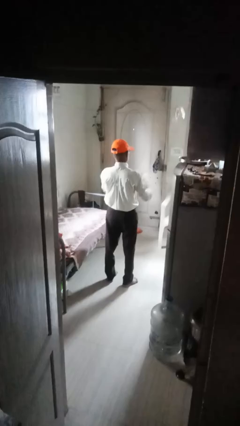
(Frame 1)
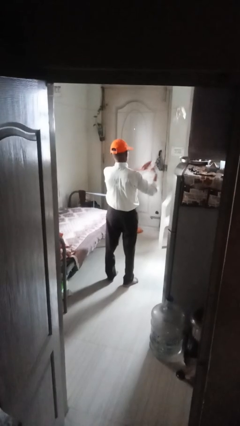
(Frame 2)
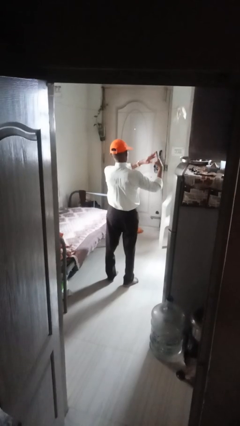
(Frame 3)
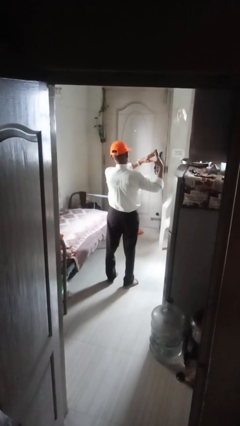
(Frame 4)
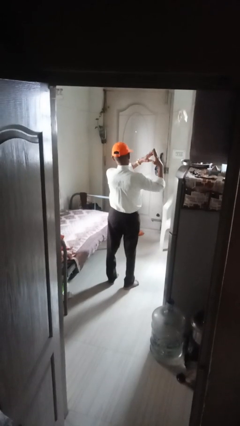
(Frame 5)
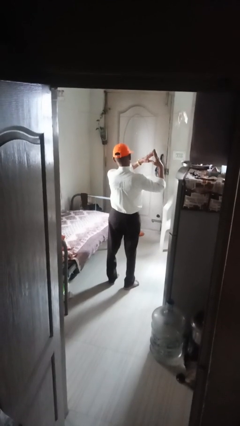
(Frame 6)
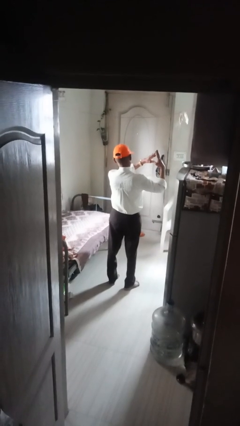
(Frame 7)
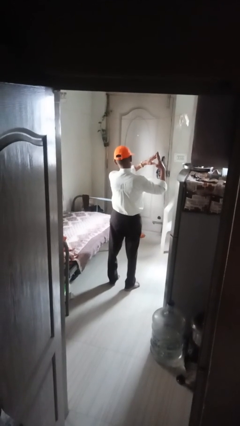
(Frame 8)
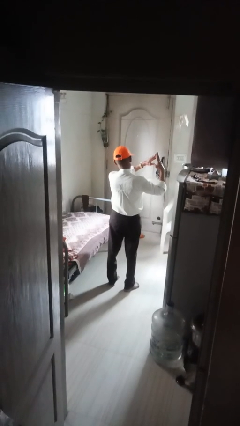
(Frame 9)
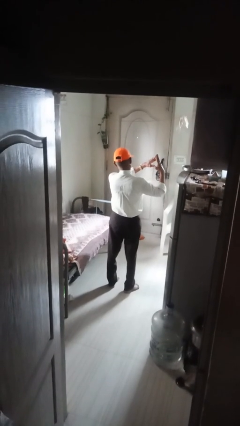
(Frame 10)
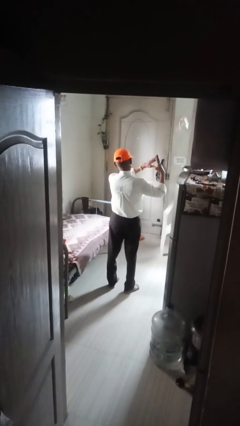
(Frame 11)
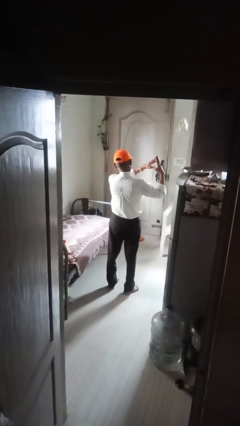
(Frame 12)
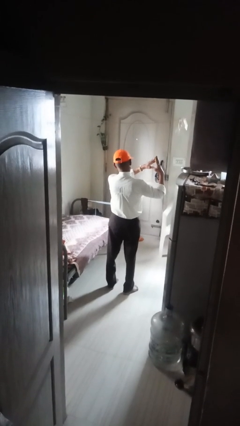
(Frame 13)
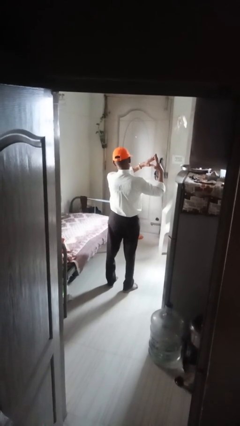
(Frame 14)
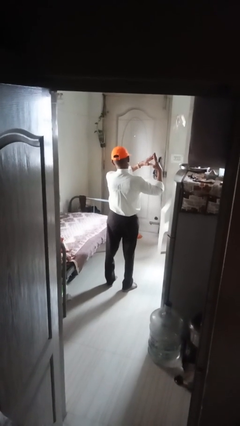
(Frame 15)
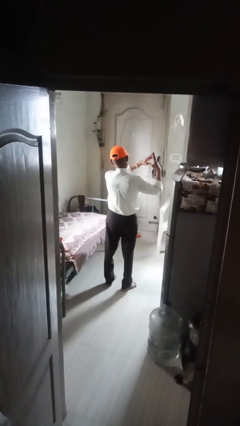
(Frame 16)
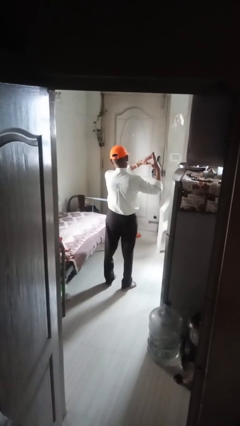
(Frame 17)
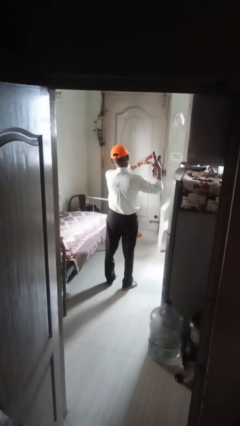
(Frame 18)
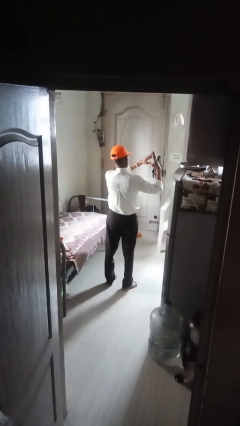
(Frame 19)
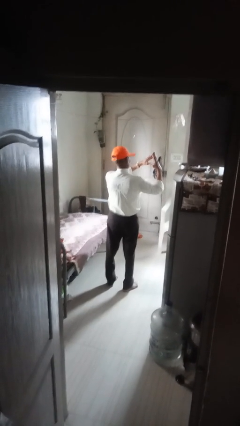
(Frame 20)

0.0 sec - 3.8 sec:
person gestures heart

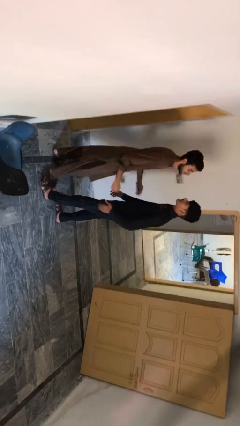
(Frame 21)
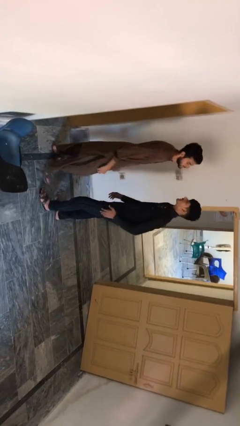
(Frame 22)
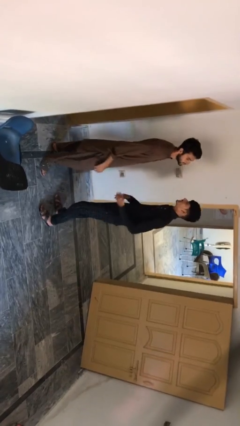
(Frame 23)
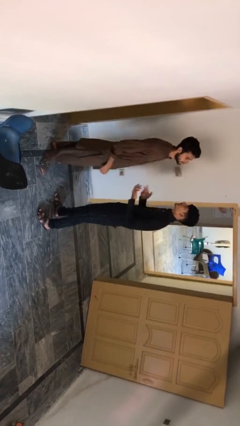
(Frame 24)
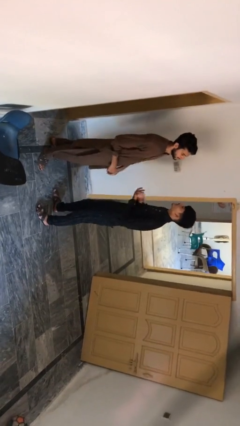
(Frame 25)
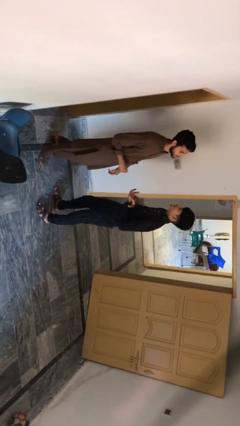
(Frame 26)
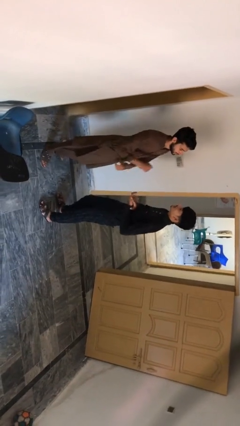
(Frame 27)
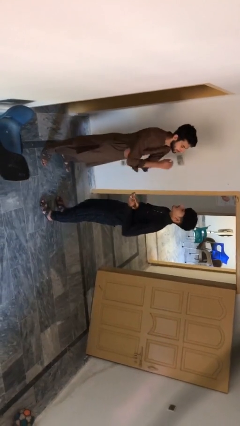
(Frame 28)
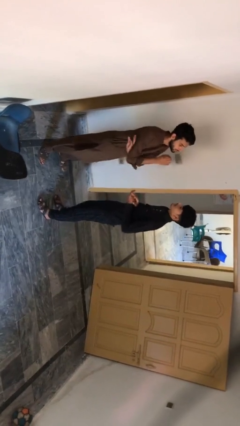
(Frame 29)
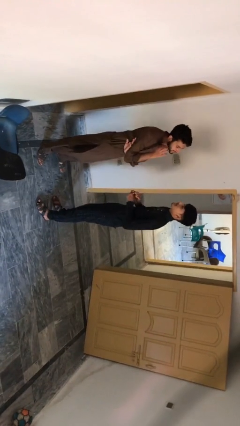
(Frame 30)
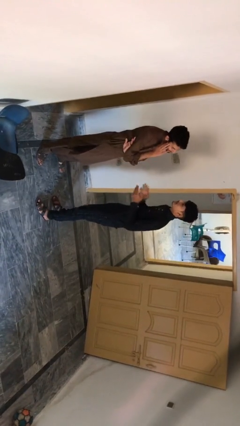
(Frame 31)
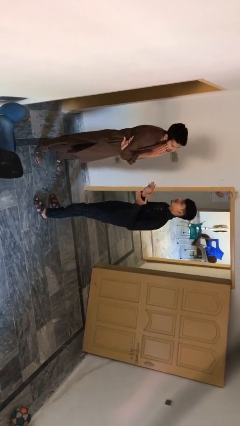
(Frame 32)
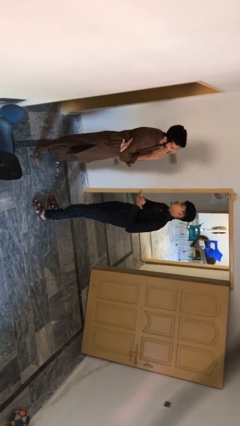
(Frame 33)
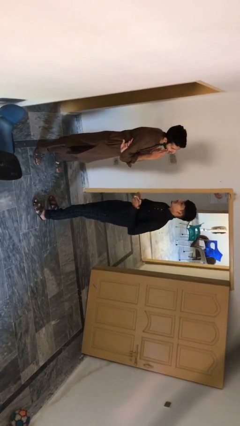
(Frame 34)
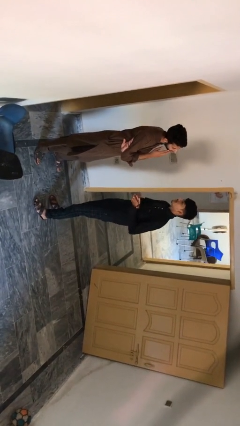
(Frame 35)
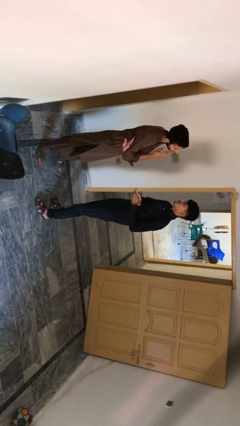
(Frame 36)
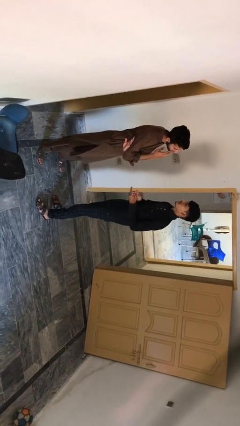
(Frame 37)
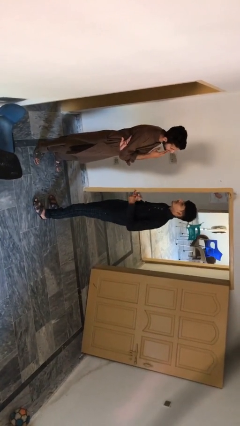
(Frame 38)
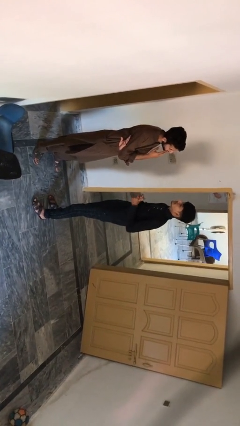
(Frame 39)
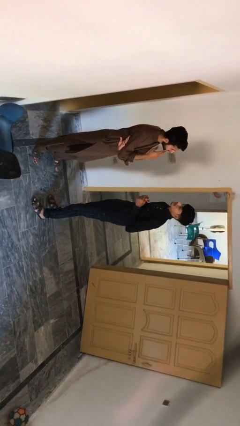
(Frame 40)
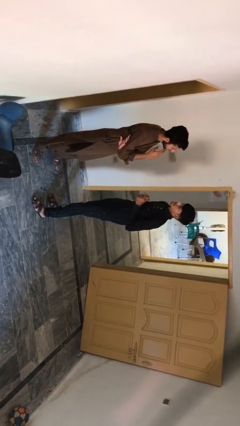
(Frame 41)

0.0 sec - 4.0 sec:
person talks to person

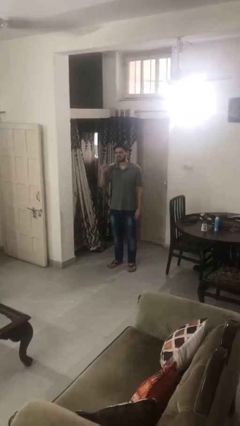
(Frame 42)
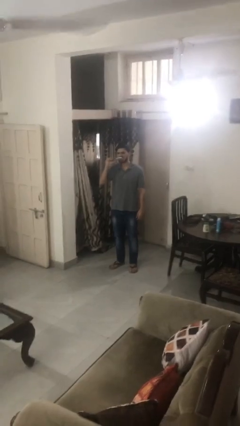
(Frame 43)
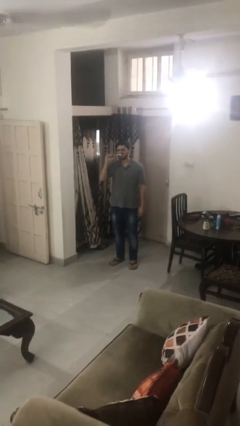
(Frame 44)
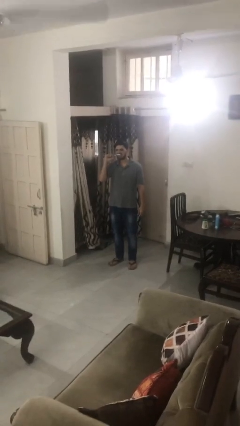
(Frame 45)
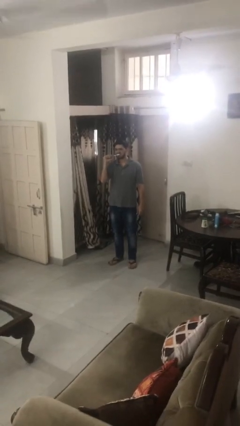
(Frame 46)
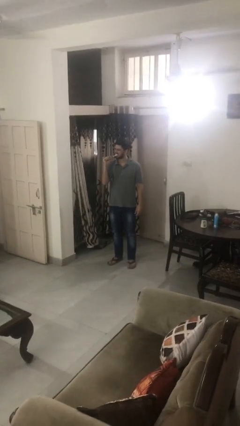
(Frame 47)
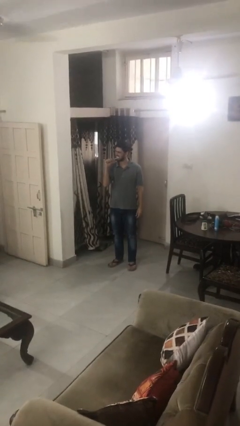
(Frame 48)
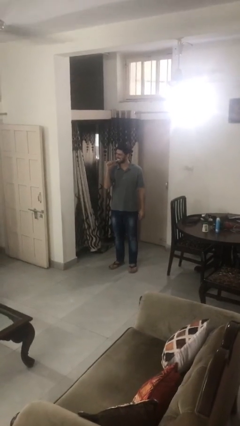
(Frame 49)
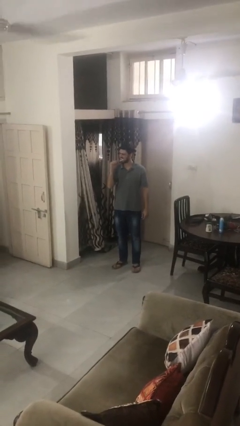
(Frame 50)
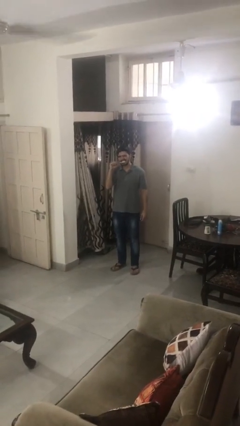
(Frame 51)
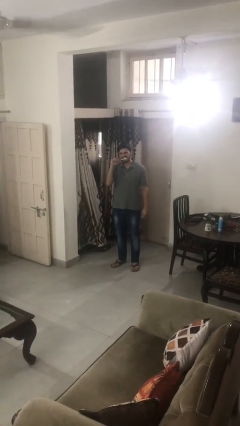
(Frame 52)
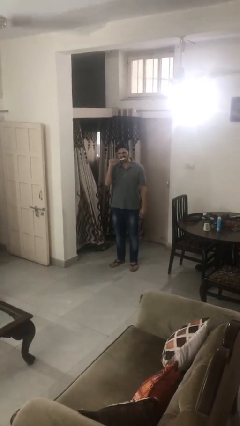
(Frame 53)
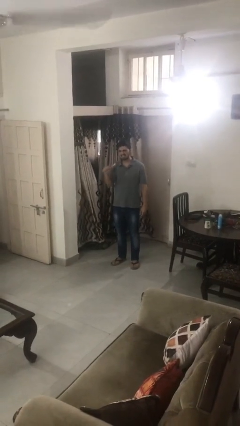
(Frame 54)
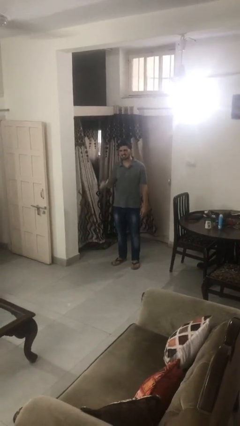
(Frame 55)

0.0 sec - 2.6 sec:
person brushes teeth

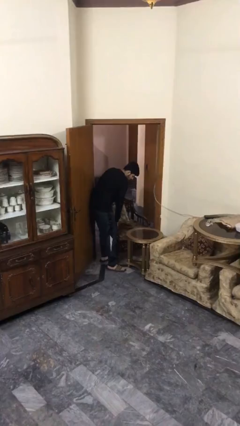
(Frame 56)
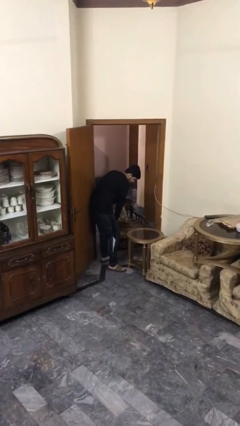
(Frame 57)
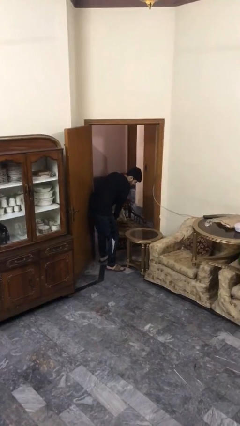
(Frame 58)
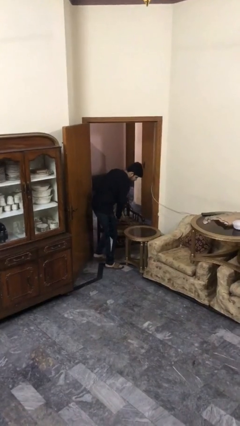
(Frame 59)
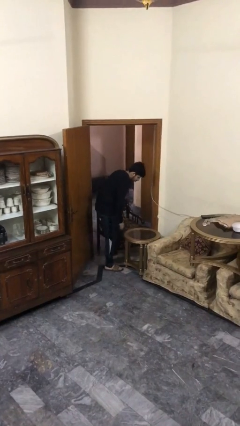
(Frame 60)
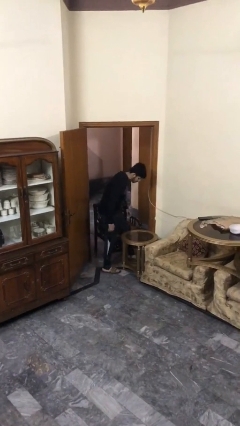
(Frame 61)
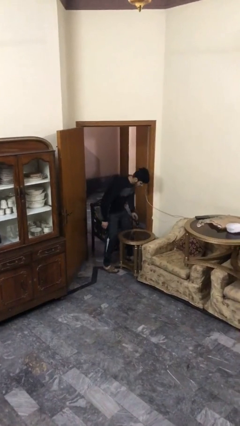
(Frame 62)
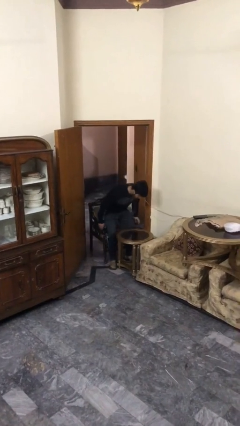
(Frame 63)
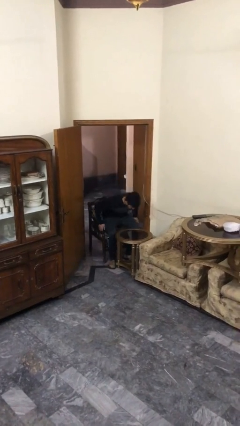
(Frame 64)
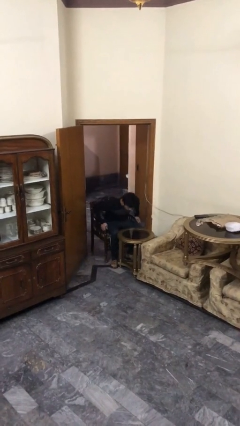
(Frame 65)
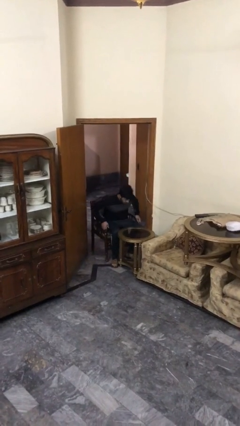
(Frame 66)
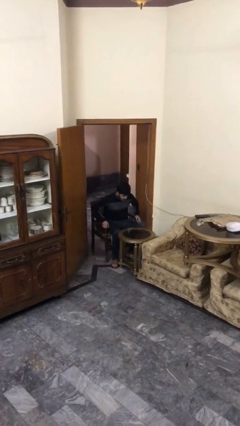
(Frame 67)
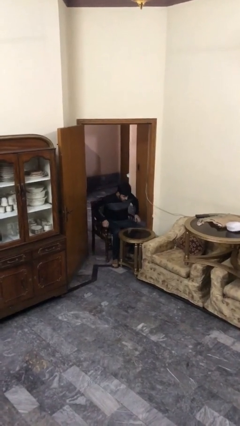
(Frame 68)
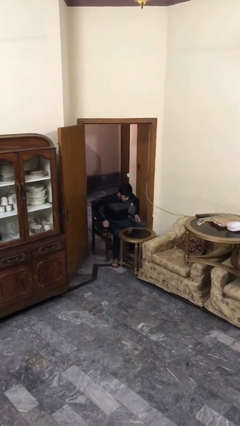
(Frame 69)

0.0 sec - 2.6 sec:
person sits down

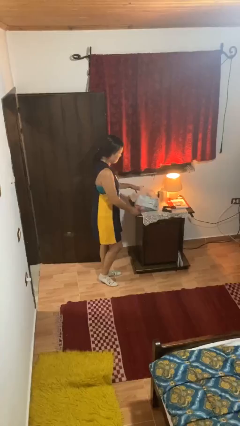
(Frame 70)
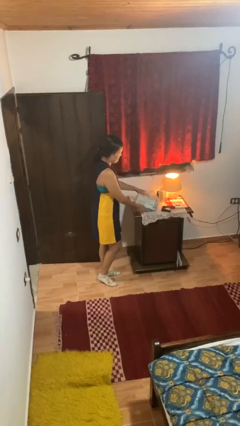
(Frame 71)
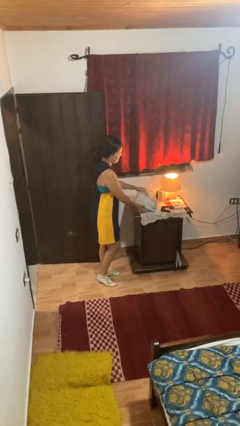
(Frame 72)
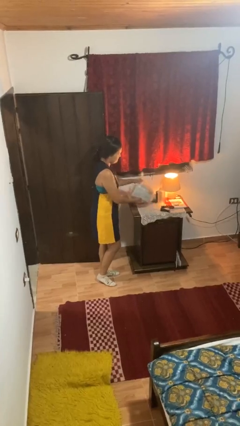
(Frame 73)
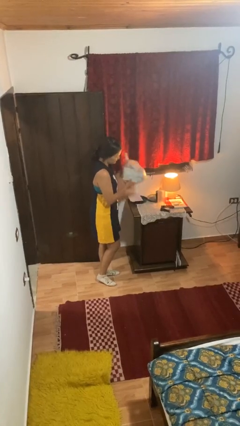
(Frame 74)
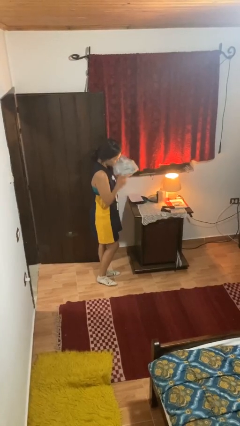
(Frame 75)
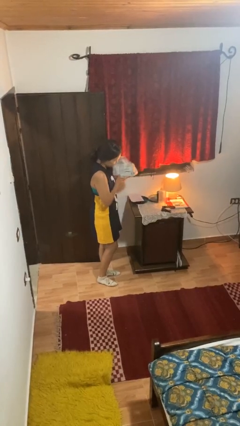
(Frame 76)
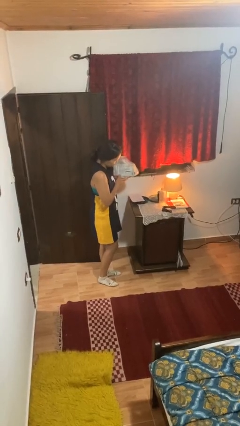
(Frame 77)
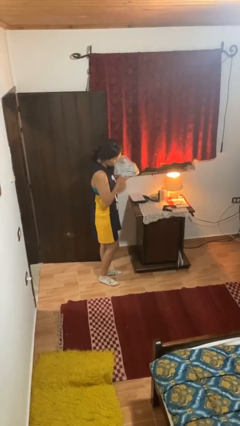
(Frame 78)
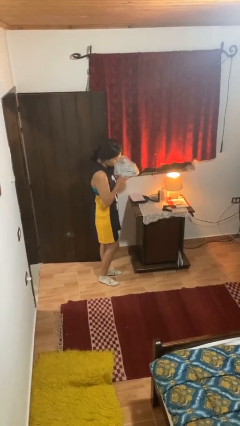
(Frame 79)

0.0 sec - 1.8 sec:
person picks up object from countertop

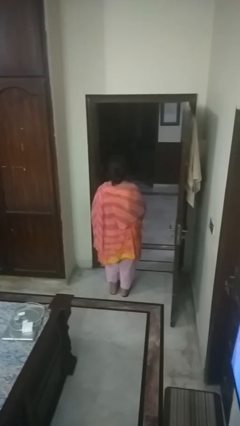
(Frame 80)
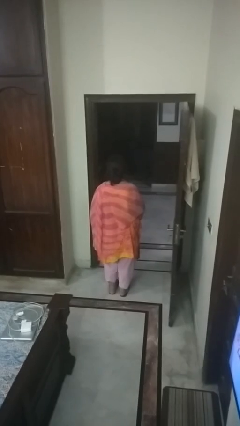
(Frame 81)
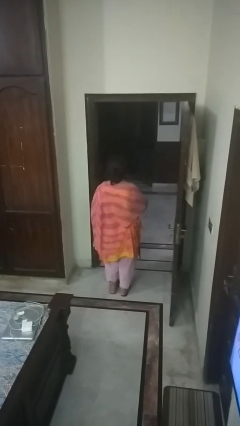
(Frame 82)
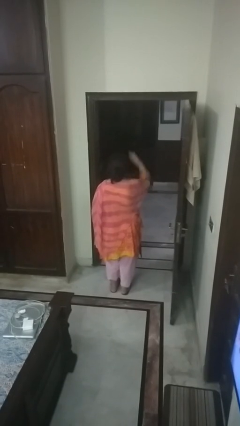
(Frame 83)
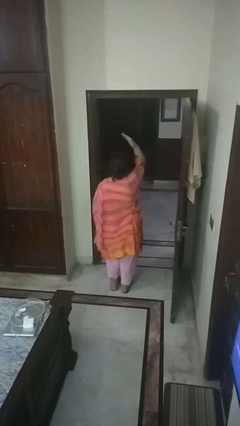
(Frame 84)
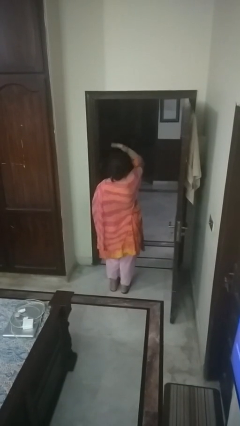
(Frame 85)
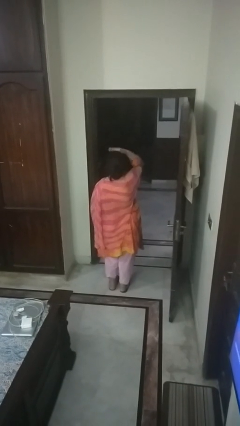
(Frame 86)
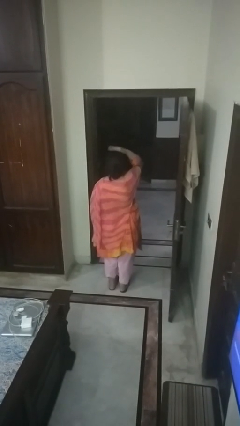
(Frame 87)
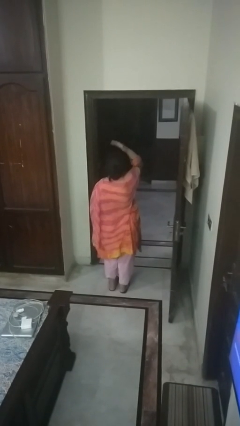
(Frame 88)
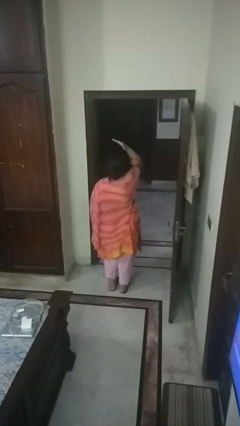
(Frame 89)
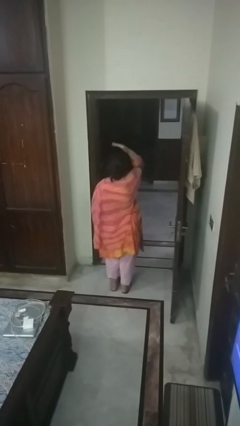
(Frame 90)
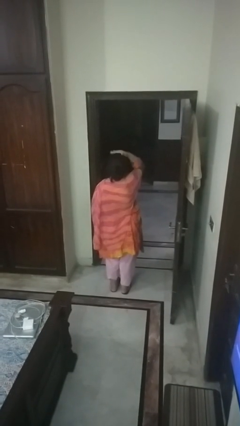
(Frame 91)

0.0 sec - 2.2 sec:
person pats head

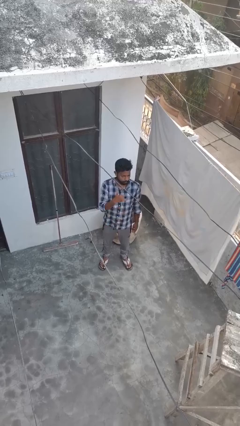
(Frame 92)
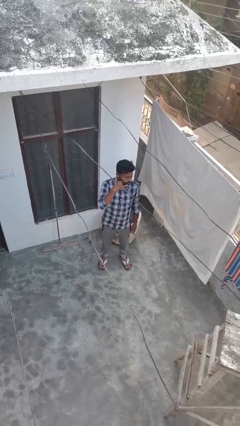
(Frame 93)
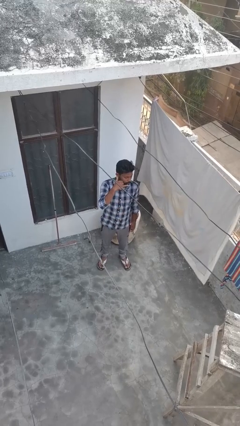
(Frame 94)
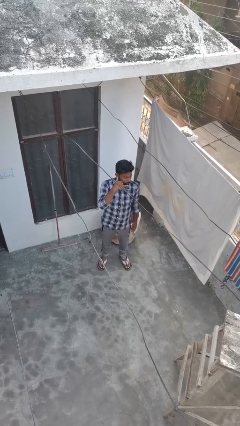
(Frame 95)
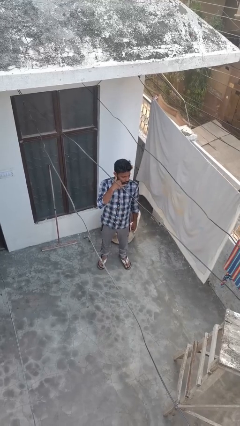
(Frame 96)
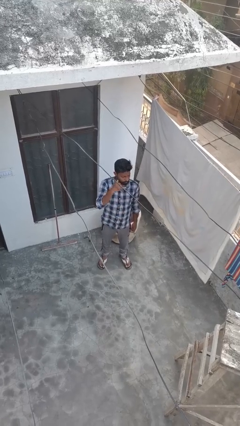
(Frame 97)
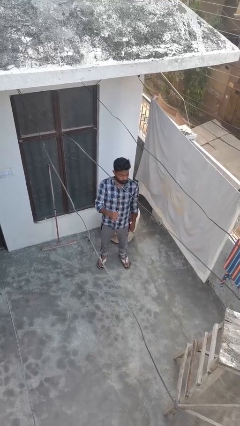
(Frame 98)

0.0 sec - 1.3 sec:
person gestures call me
